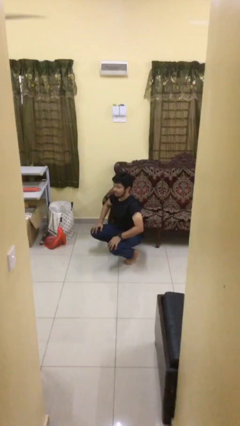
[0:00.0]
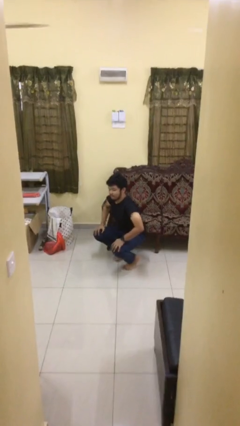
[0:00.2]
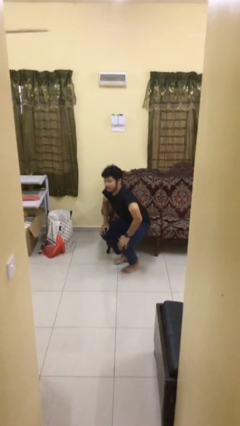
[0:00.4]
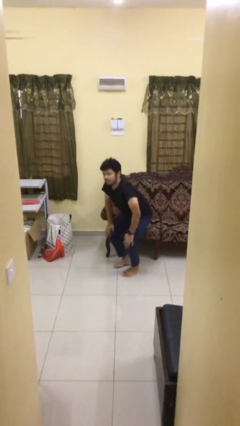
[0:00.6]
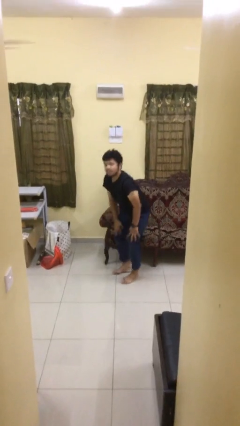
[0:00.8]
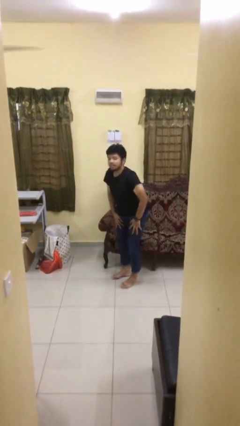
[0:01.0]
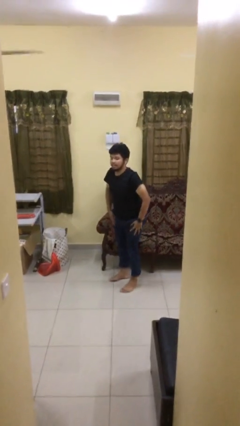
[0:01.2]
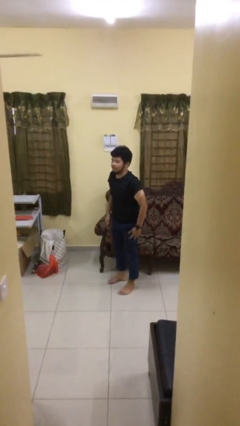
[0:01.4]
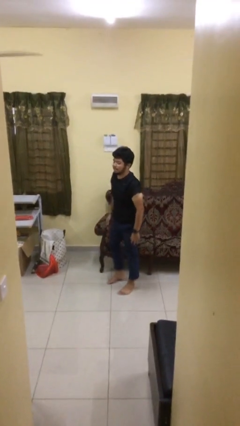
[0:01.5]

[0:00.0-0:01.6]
person stands up

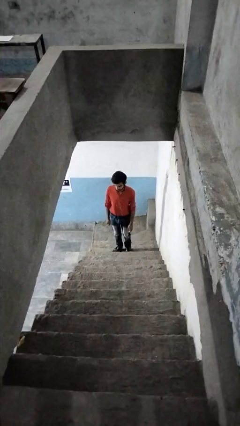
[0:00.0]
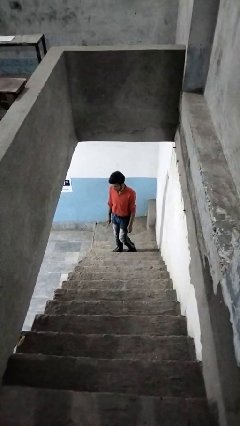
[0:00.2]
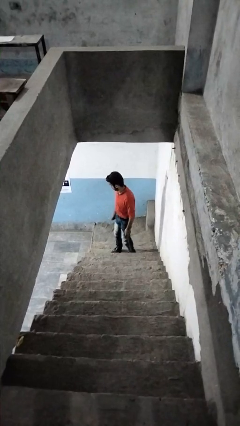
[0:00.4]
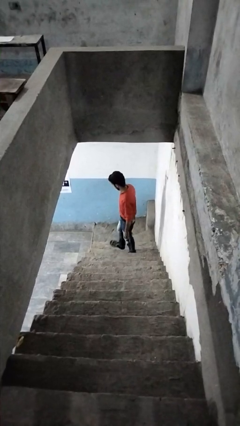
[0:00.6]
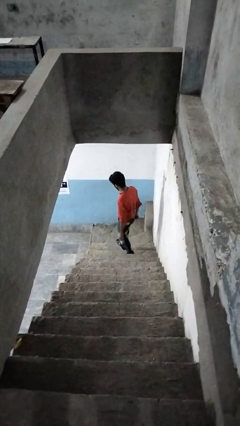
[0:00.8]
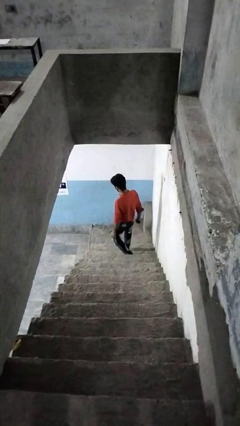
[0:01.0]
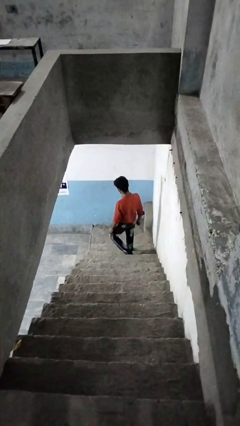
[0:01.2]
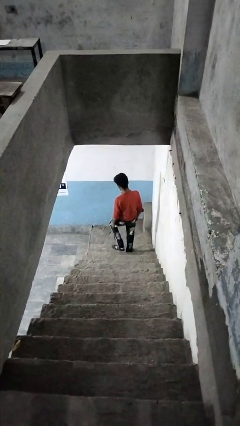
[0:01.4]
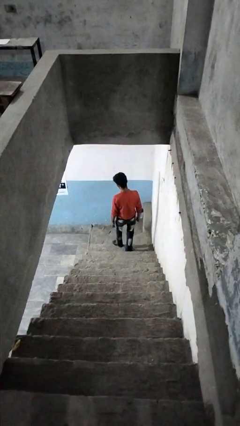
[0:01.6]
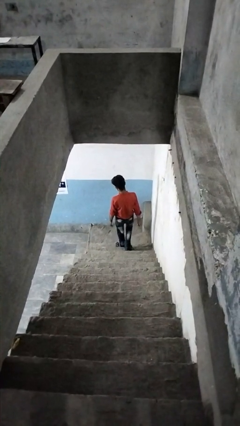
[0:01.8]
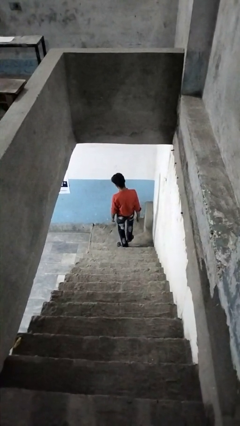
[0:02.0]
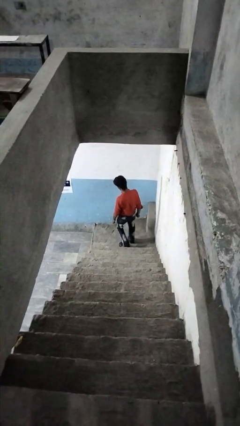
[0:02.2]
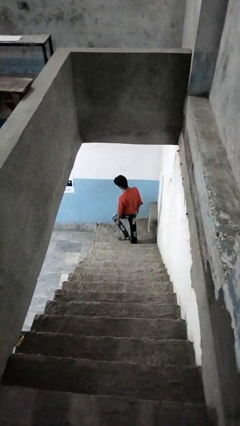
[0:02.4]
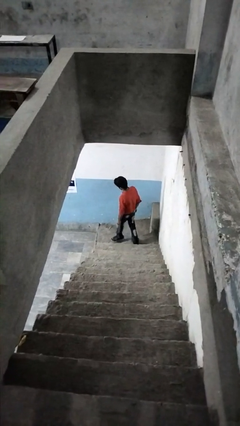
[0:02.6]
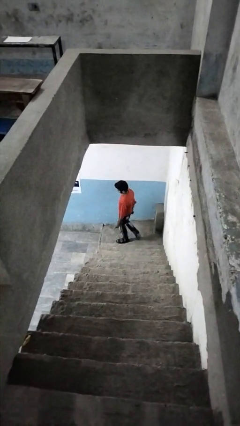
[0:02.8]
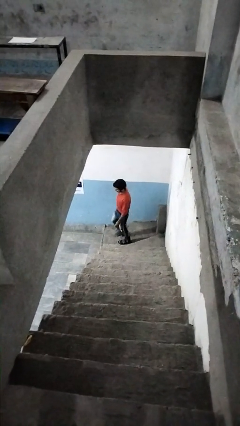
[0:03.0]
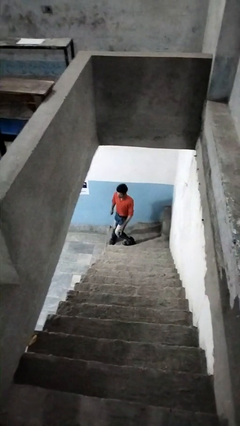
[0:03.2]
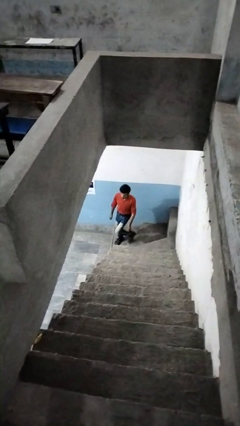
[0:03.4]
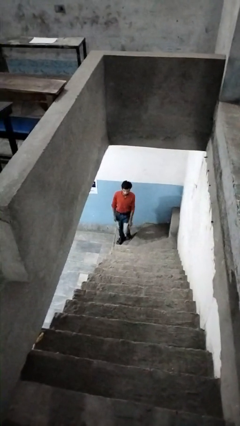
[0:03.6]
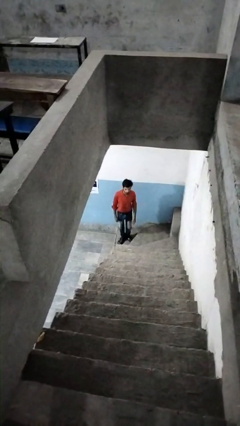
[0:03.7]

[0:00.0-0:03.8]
person climbs down stairs

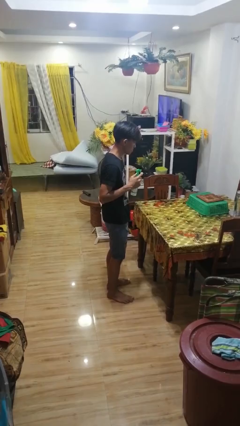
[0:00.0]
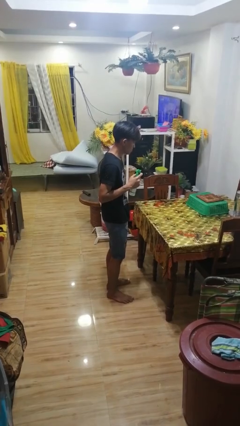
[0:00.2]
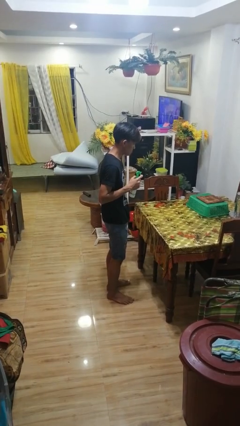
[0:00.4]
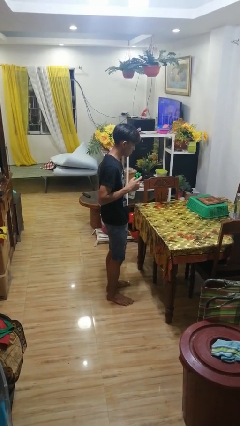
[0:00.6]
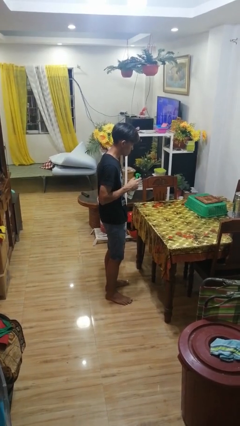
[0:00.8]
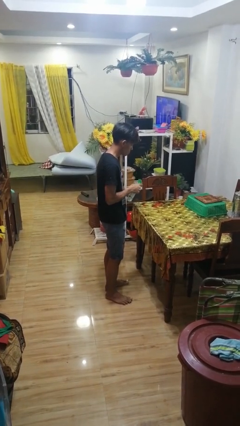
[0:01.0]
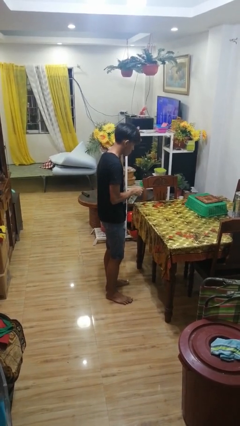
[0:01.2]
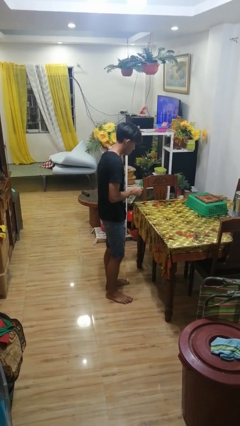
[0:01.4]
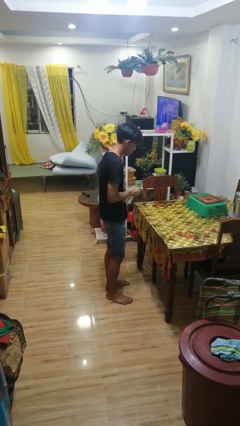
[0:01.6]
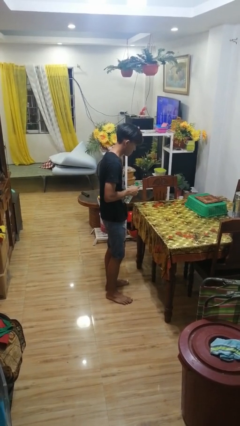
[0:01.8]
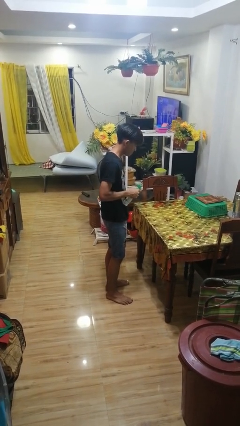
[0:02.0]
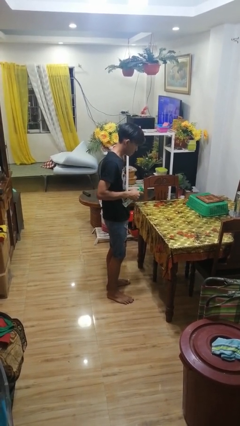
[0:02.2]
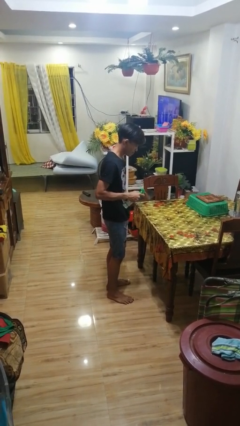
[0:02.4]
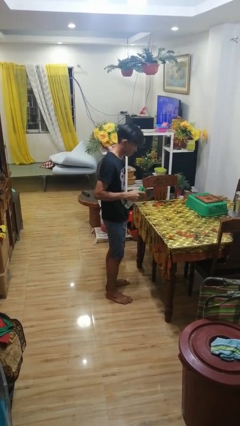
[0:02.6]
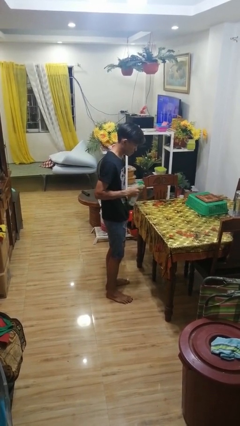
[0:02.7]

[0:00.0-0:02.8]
person sprays from bottle

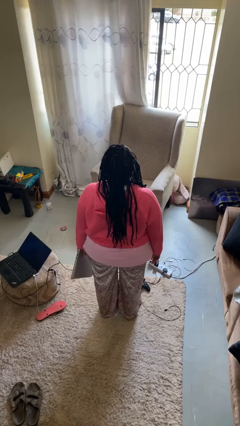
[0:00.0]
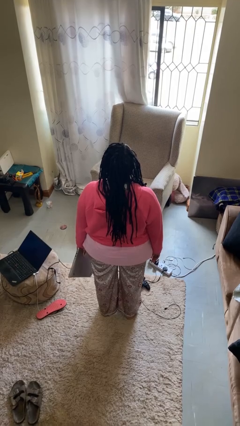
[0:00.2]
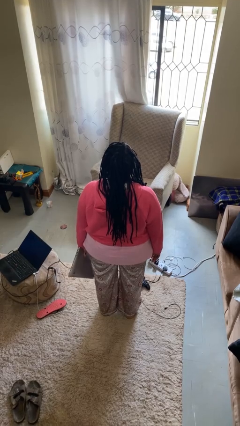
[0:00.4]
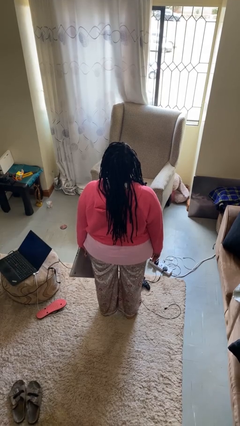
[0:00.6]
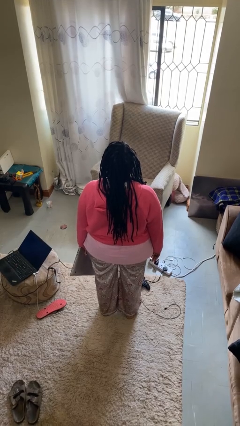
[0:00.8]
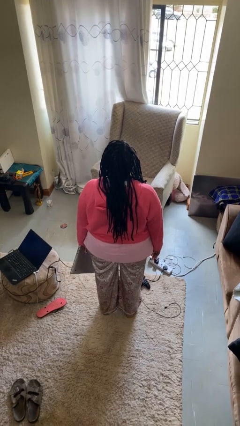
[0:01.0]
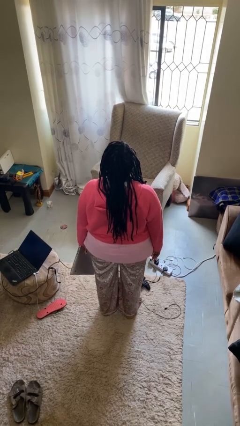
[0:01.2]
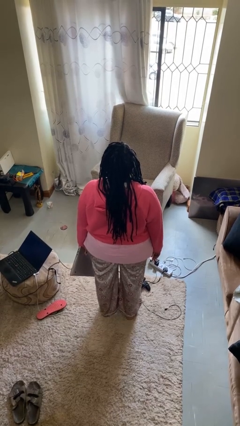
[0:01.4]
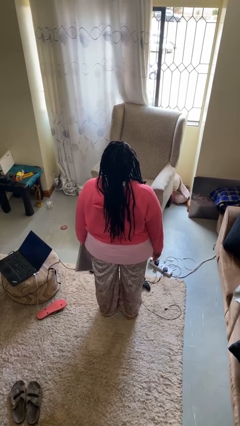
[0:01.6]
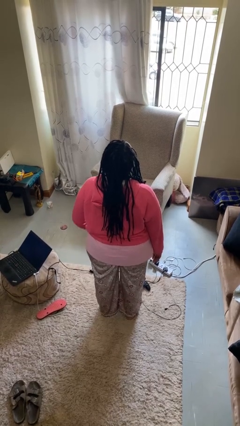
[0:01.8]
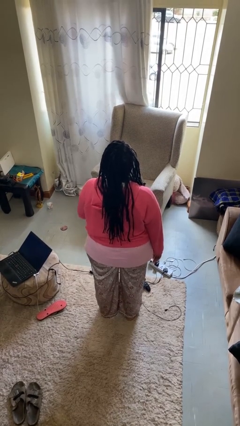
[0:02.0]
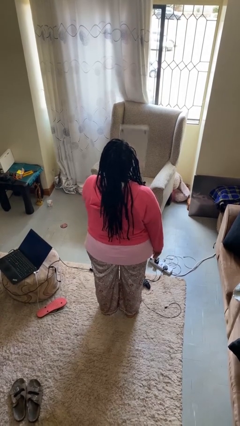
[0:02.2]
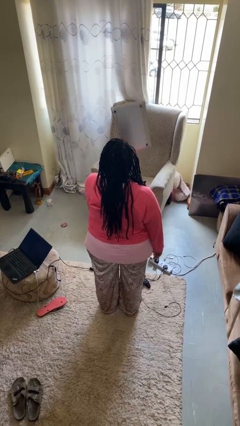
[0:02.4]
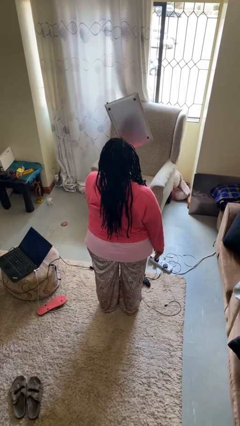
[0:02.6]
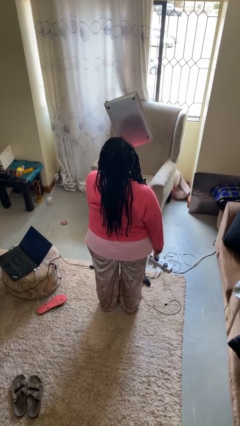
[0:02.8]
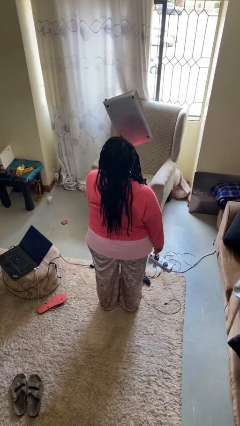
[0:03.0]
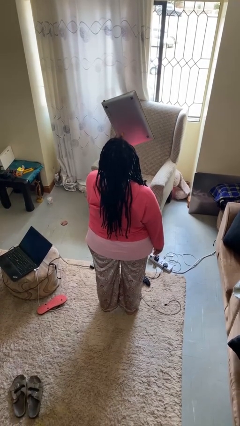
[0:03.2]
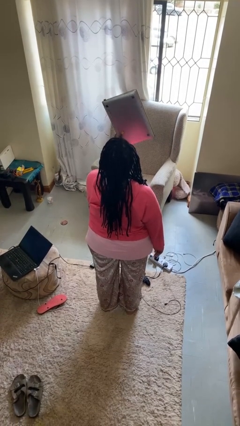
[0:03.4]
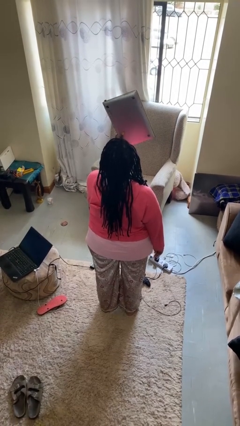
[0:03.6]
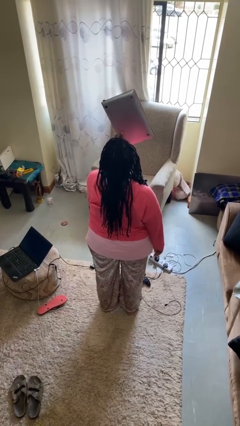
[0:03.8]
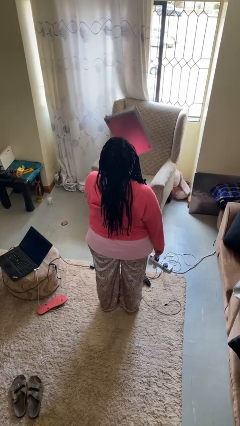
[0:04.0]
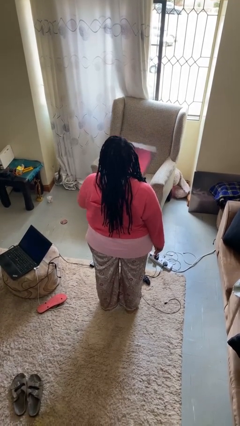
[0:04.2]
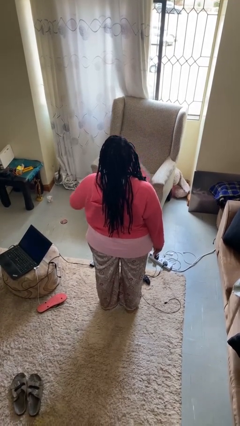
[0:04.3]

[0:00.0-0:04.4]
person holds object above head

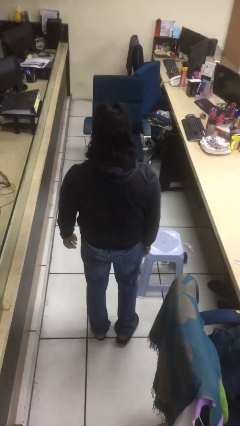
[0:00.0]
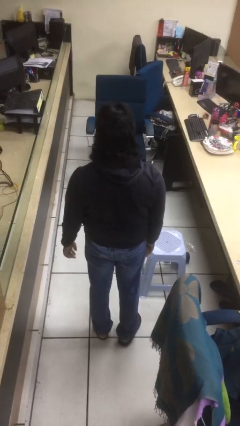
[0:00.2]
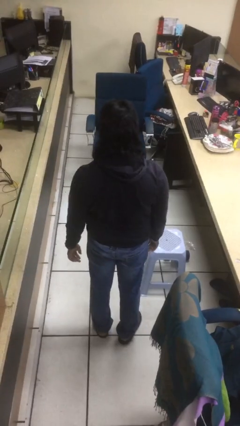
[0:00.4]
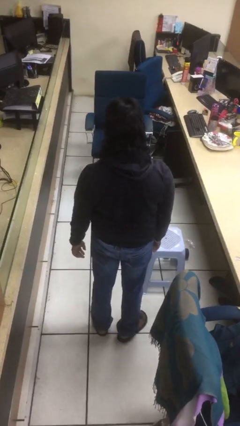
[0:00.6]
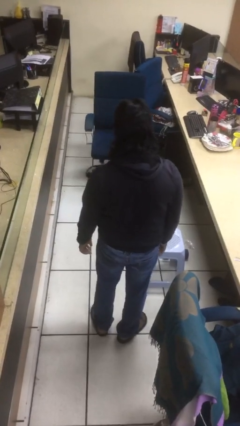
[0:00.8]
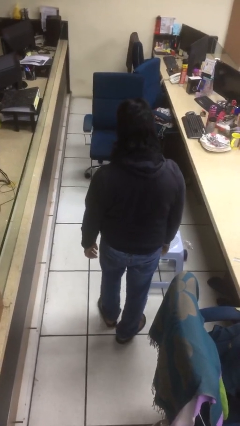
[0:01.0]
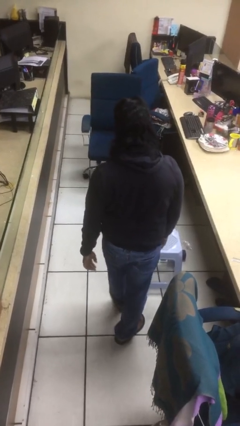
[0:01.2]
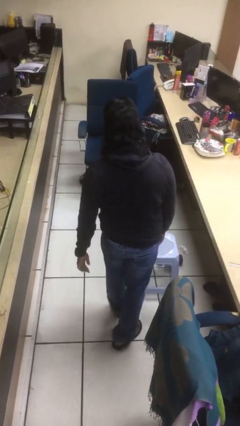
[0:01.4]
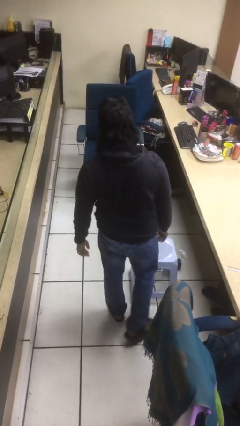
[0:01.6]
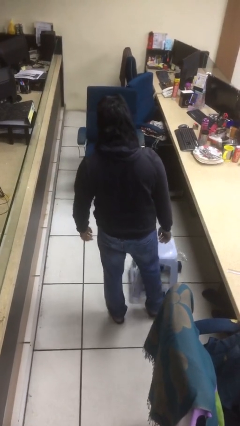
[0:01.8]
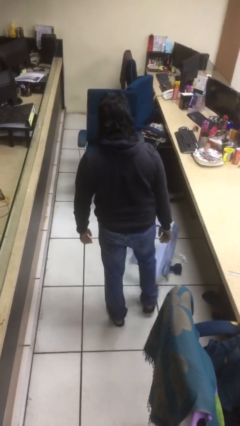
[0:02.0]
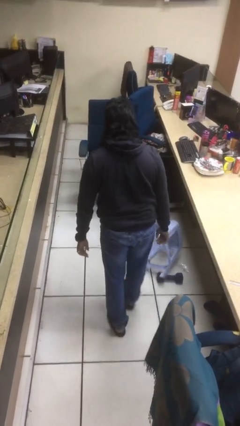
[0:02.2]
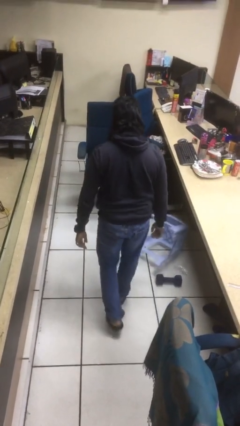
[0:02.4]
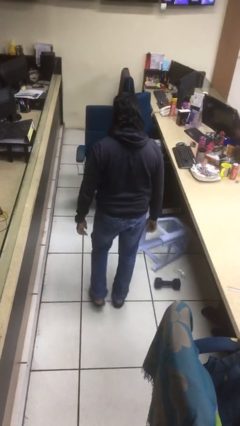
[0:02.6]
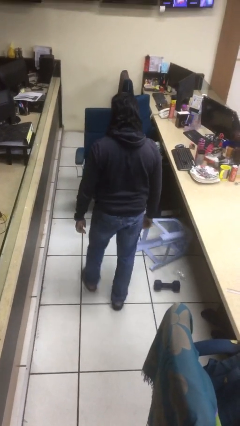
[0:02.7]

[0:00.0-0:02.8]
person knocks over furniture

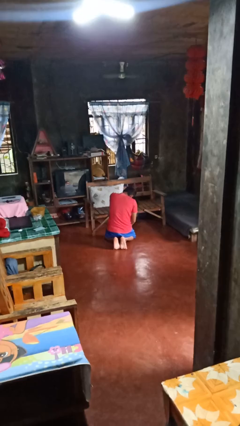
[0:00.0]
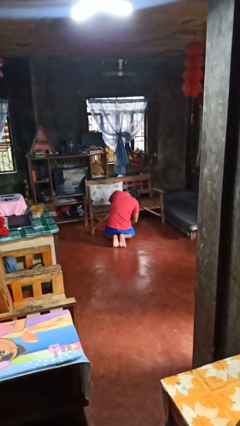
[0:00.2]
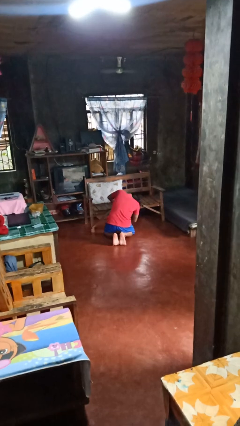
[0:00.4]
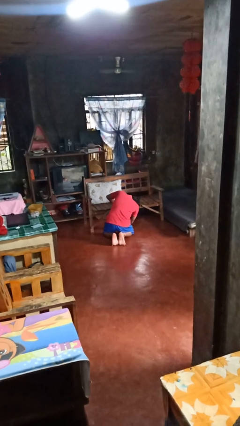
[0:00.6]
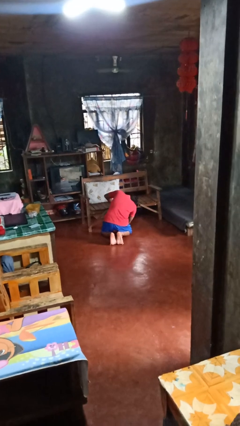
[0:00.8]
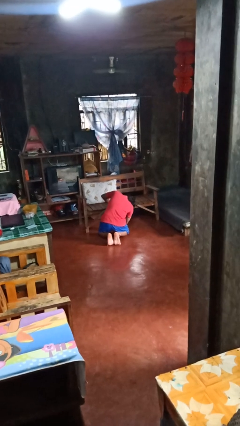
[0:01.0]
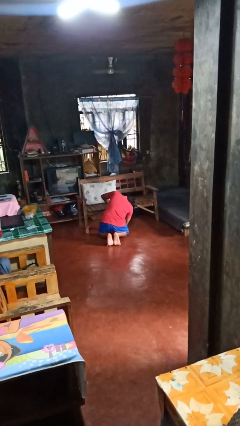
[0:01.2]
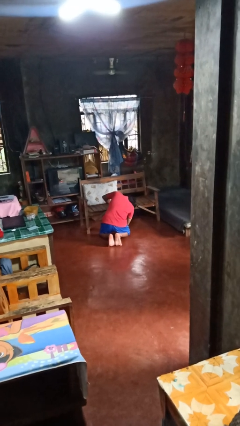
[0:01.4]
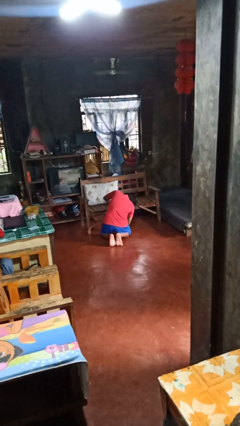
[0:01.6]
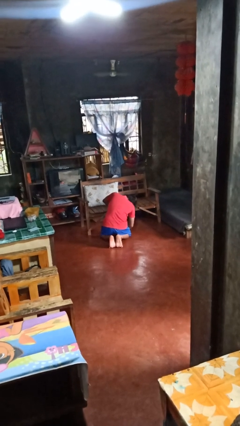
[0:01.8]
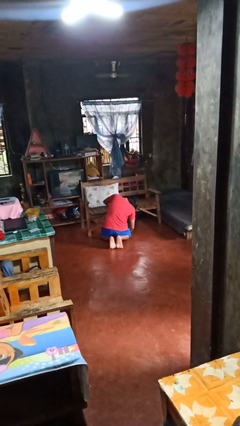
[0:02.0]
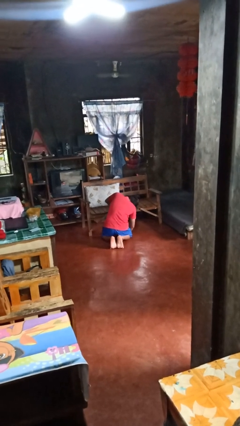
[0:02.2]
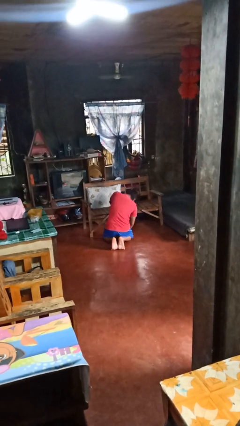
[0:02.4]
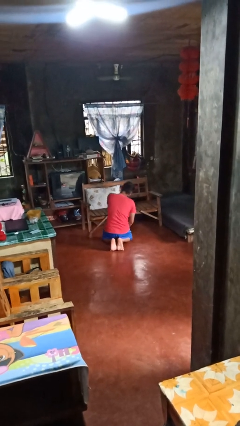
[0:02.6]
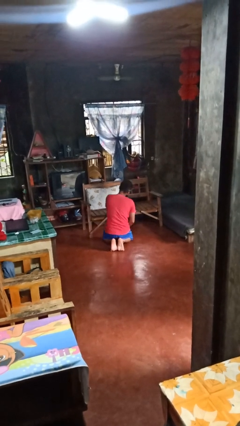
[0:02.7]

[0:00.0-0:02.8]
person searches under couch
